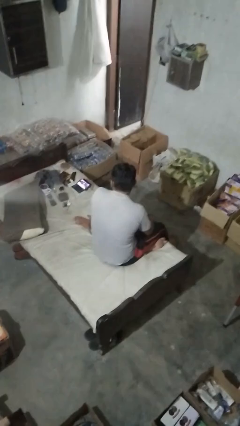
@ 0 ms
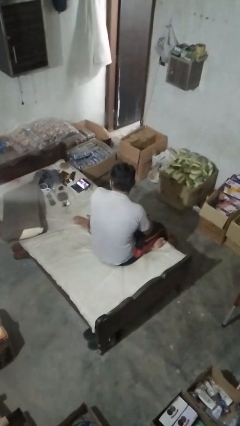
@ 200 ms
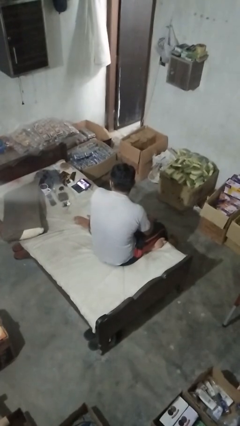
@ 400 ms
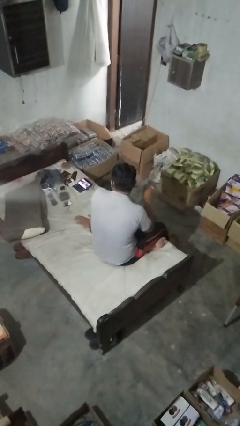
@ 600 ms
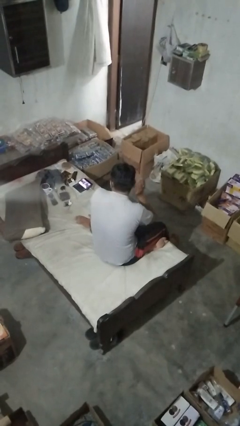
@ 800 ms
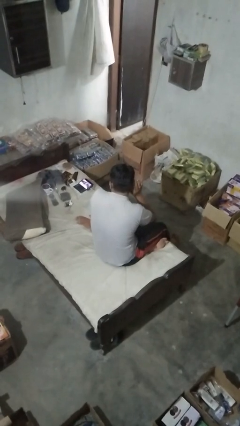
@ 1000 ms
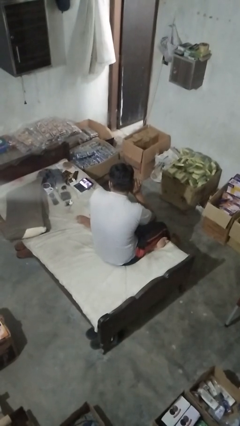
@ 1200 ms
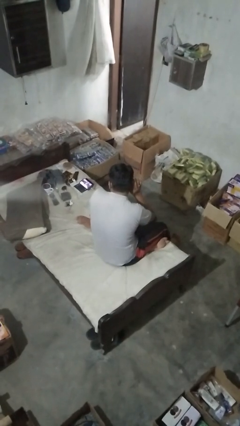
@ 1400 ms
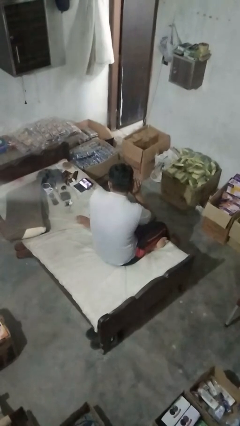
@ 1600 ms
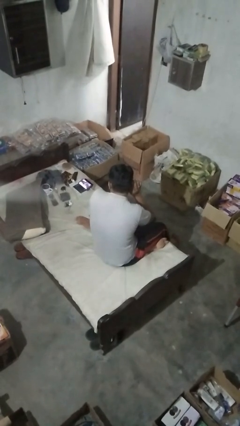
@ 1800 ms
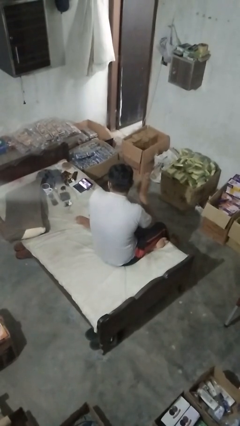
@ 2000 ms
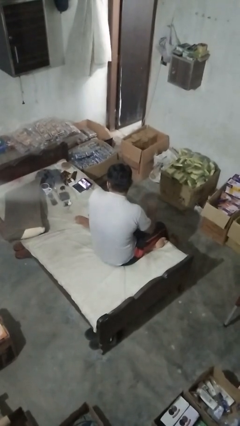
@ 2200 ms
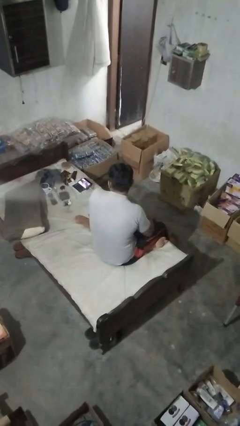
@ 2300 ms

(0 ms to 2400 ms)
person gestures listen closely

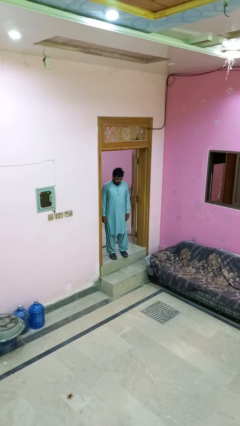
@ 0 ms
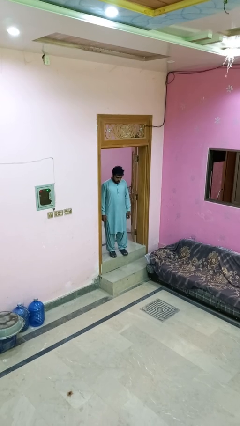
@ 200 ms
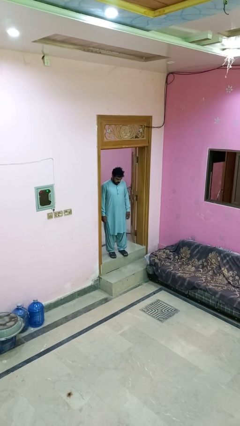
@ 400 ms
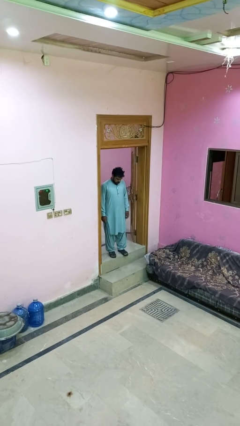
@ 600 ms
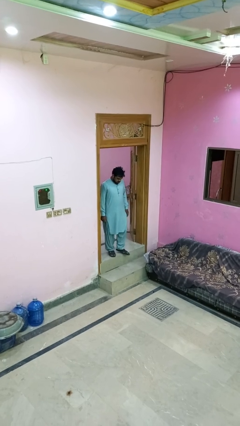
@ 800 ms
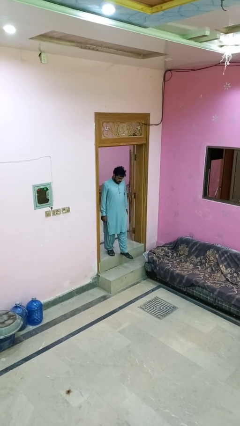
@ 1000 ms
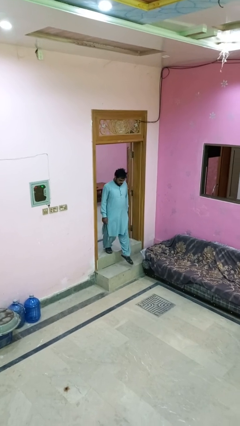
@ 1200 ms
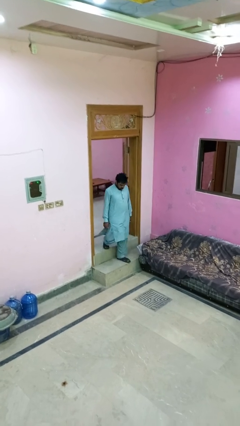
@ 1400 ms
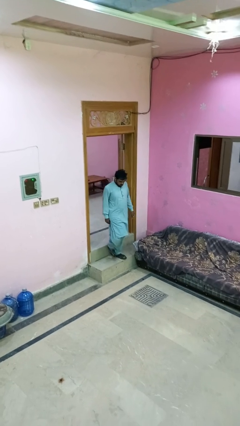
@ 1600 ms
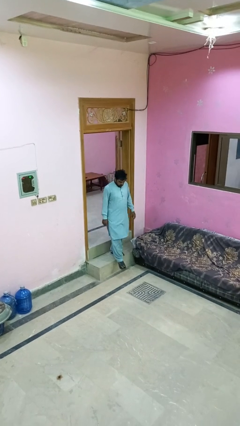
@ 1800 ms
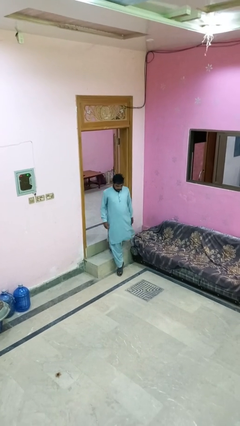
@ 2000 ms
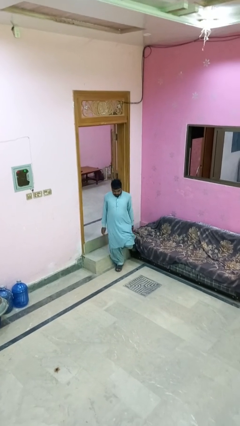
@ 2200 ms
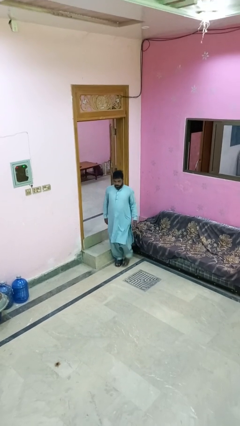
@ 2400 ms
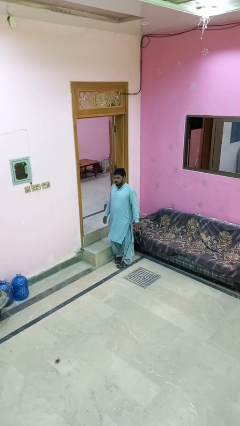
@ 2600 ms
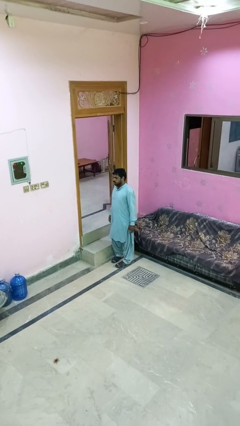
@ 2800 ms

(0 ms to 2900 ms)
person climbs down stairs

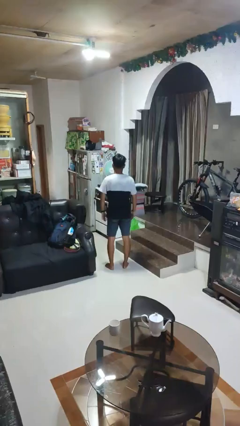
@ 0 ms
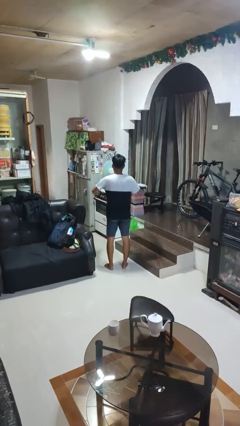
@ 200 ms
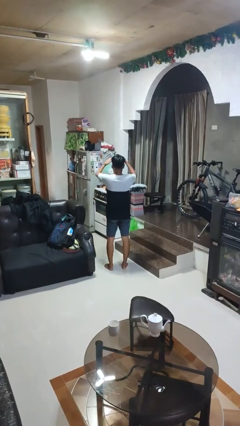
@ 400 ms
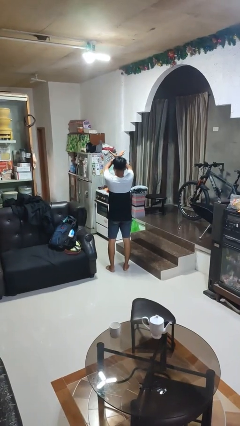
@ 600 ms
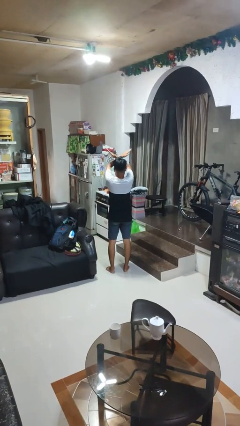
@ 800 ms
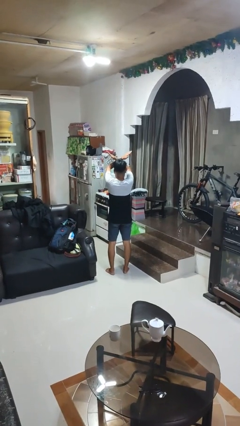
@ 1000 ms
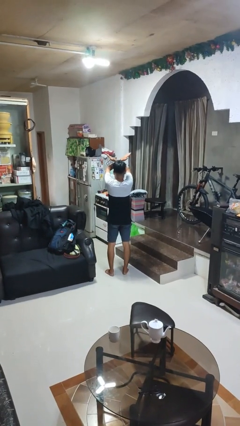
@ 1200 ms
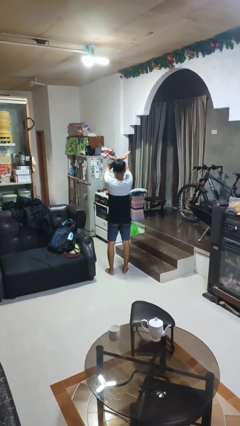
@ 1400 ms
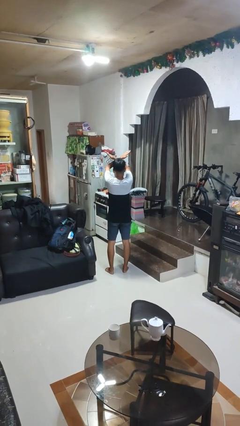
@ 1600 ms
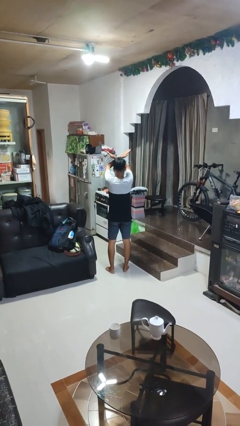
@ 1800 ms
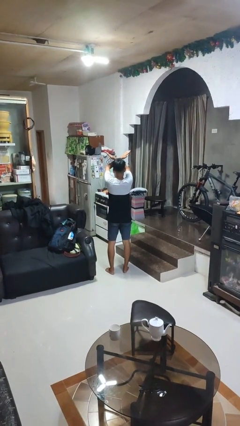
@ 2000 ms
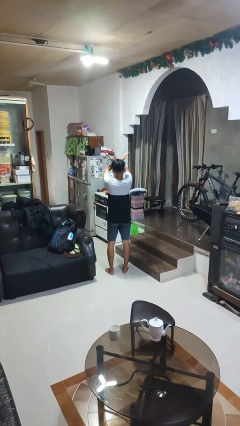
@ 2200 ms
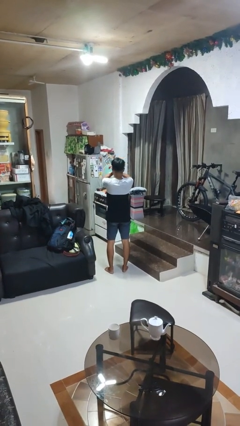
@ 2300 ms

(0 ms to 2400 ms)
person gestures arms x

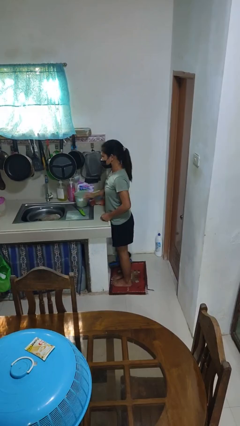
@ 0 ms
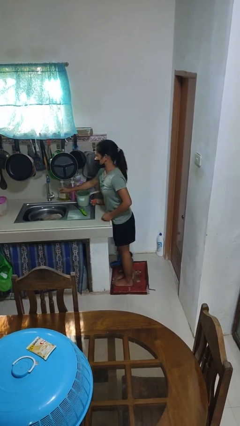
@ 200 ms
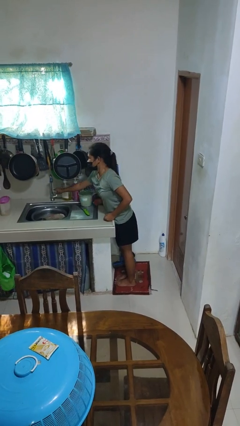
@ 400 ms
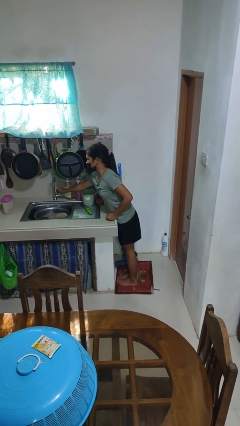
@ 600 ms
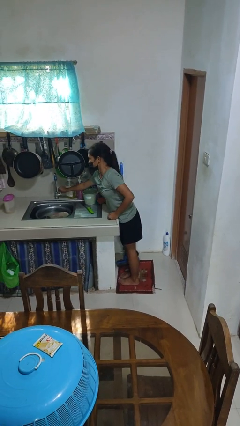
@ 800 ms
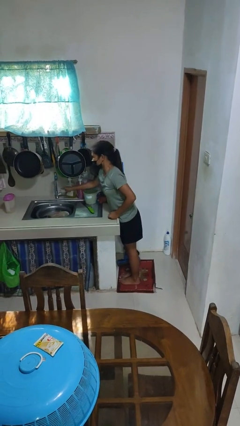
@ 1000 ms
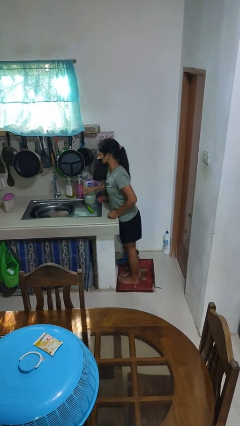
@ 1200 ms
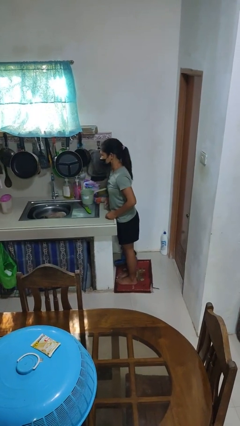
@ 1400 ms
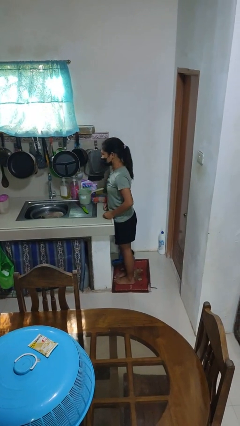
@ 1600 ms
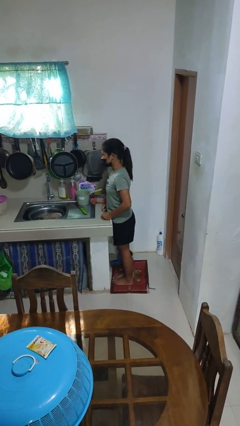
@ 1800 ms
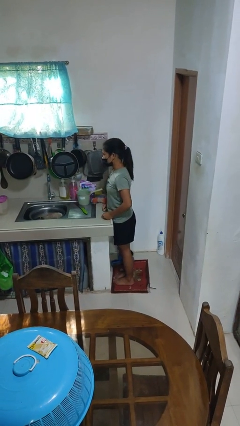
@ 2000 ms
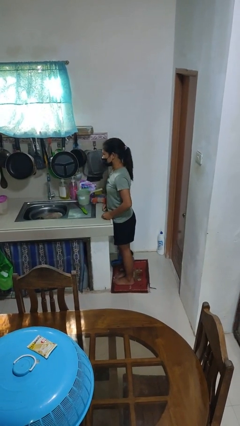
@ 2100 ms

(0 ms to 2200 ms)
person turns on faucet

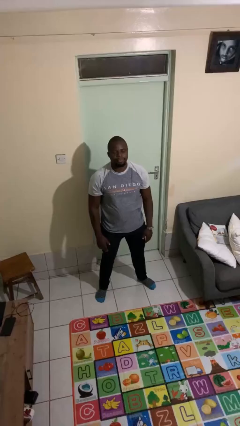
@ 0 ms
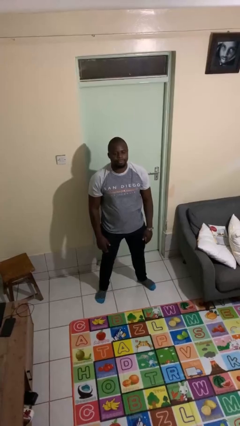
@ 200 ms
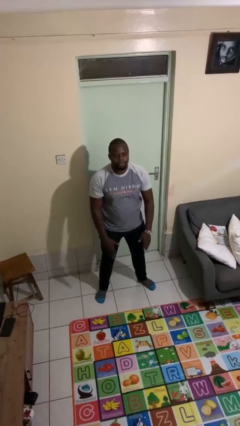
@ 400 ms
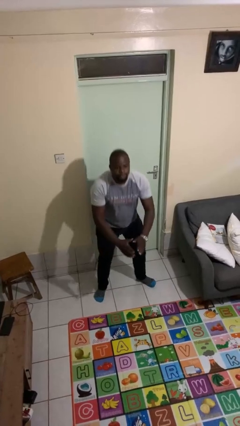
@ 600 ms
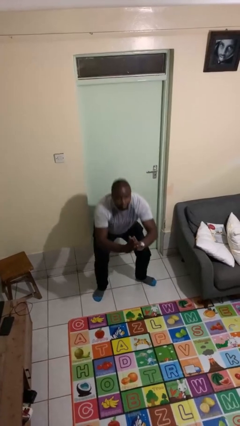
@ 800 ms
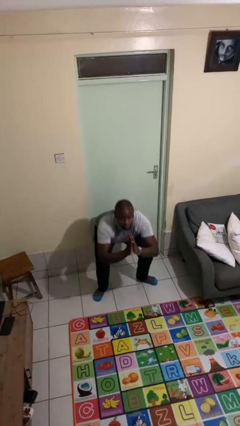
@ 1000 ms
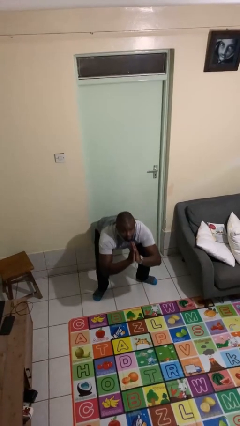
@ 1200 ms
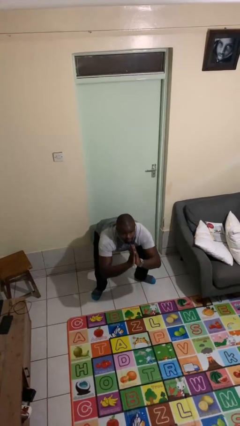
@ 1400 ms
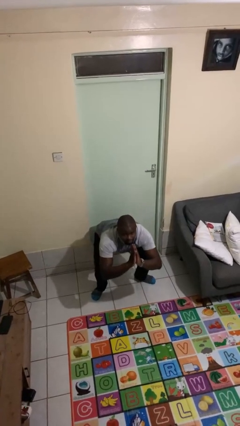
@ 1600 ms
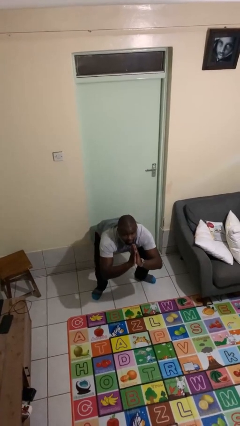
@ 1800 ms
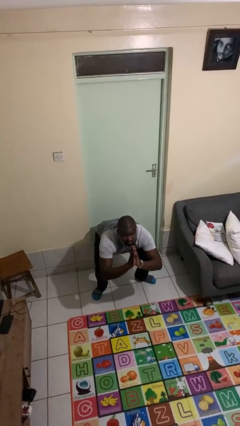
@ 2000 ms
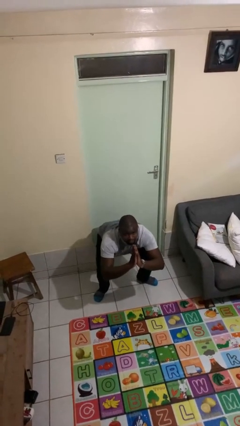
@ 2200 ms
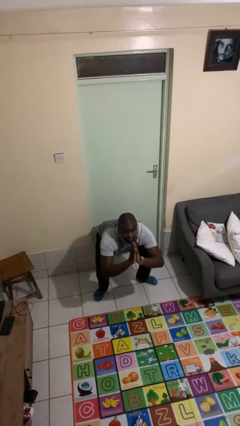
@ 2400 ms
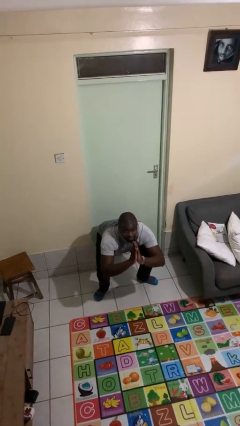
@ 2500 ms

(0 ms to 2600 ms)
person squats

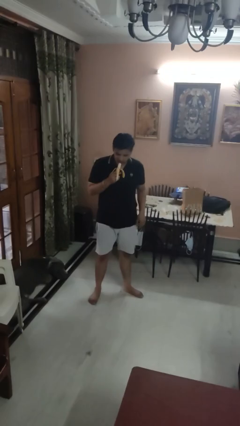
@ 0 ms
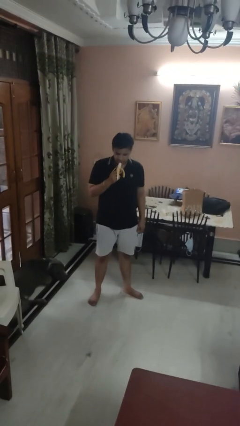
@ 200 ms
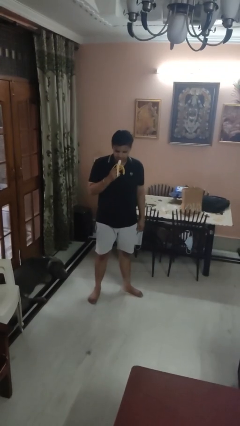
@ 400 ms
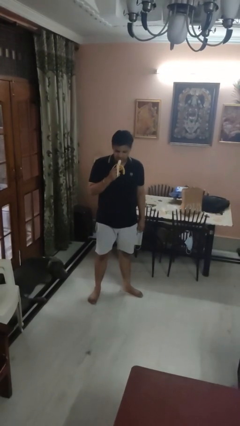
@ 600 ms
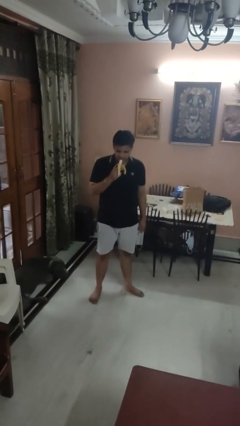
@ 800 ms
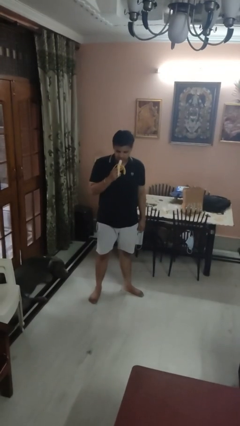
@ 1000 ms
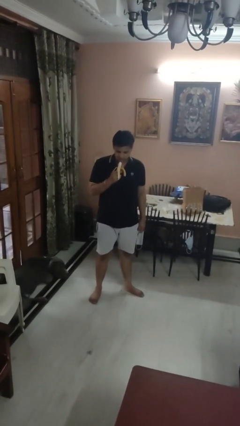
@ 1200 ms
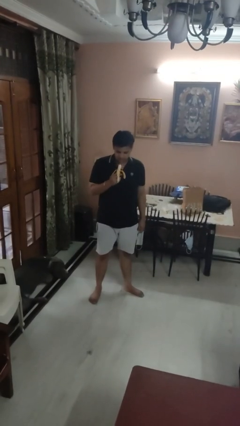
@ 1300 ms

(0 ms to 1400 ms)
person eats banana

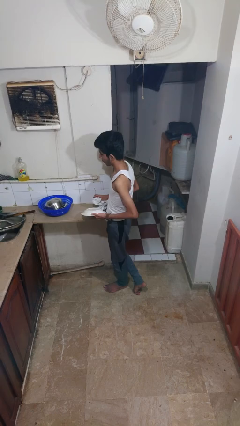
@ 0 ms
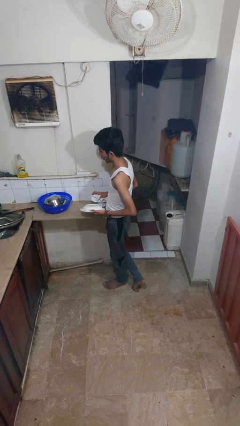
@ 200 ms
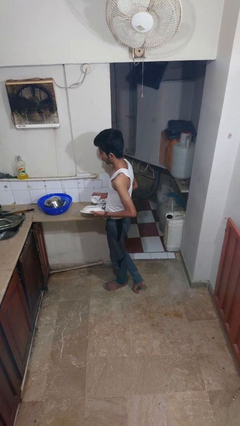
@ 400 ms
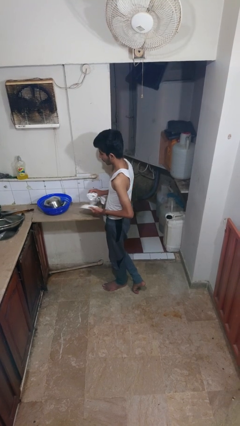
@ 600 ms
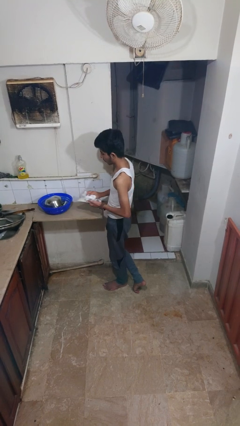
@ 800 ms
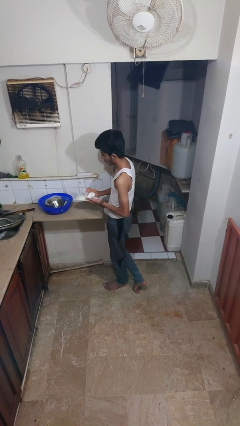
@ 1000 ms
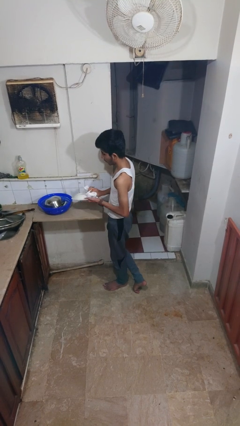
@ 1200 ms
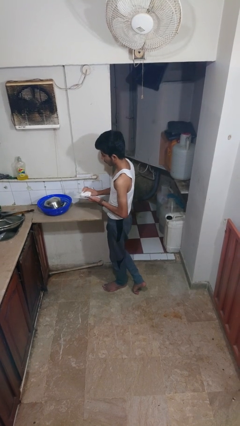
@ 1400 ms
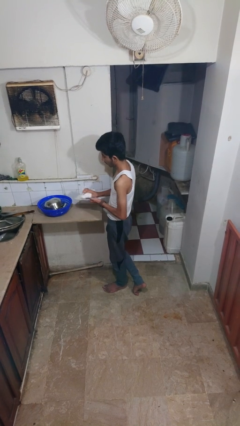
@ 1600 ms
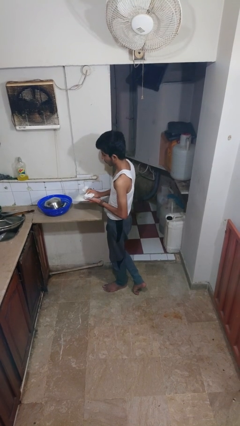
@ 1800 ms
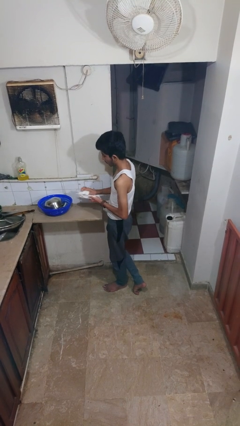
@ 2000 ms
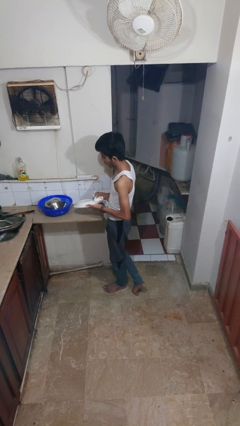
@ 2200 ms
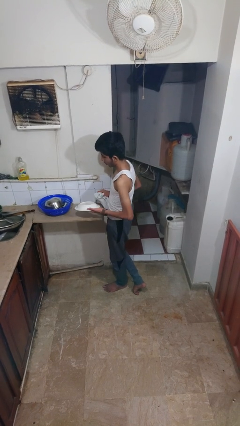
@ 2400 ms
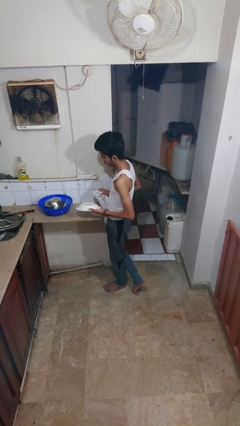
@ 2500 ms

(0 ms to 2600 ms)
person dries dish

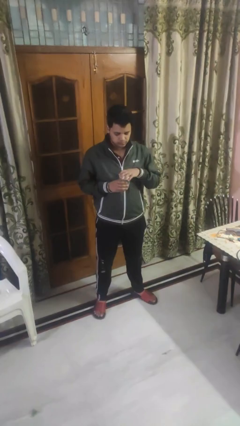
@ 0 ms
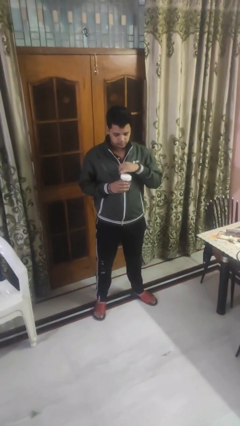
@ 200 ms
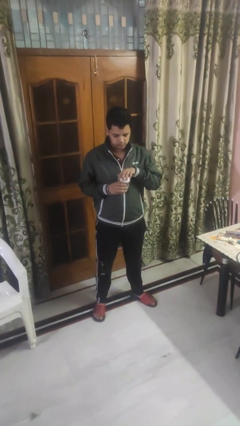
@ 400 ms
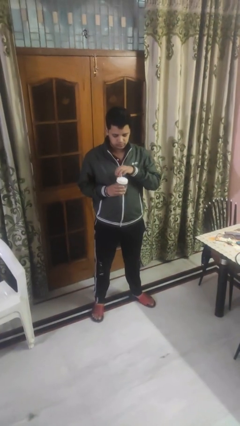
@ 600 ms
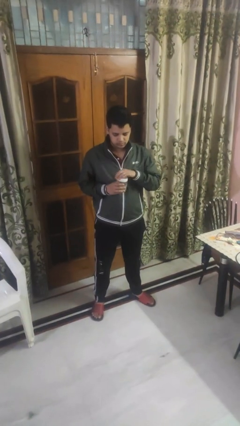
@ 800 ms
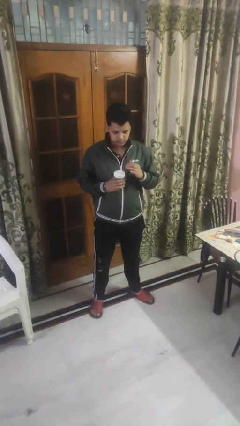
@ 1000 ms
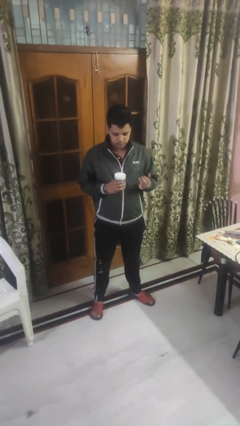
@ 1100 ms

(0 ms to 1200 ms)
person closes jar
